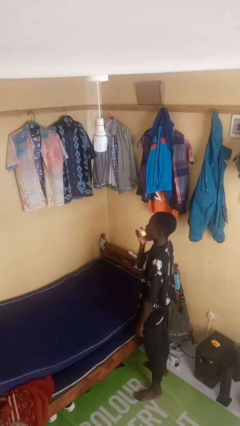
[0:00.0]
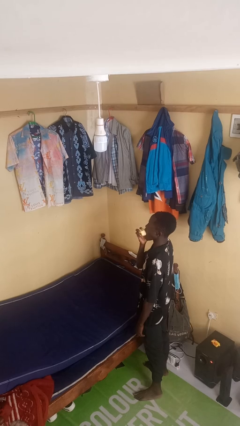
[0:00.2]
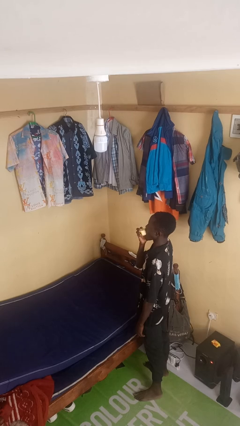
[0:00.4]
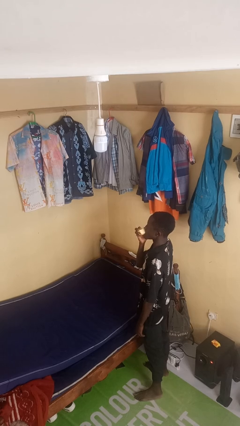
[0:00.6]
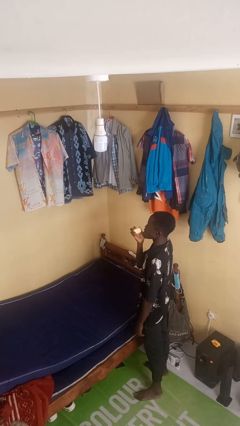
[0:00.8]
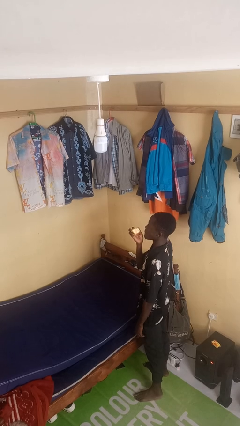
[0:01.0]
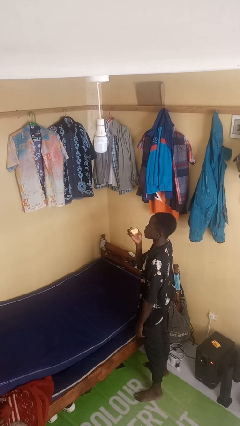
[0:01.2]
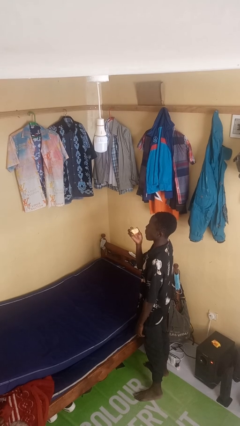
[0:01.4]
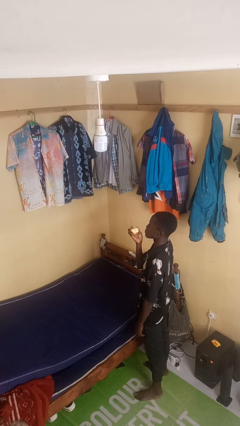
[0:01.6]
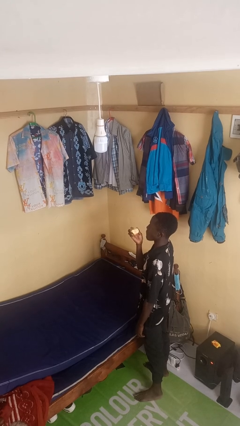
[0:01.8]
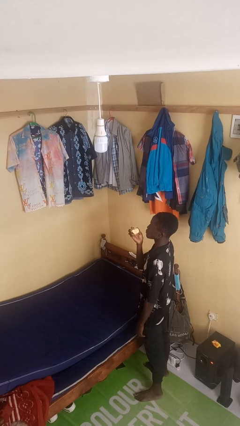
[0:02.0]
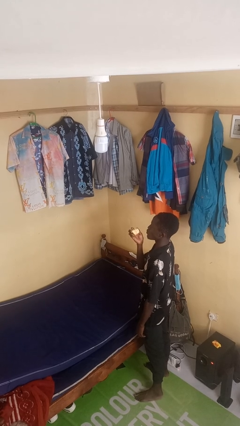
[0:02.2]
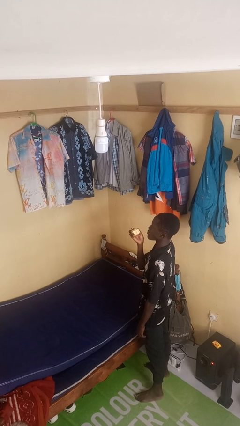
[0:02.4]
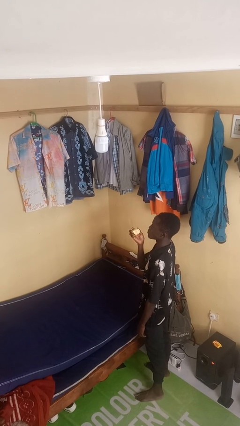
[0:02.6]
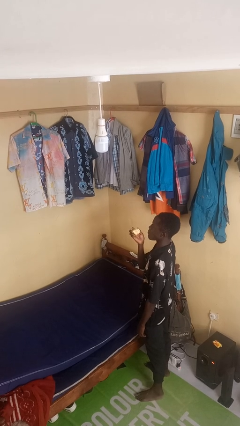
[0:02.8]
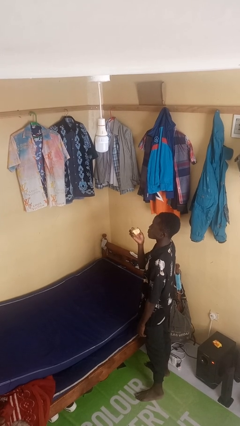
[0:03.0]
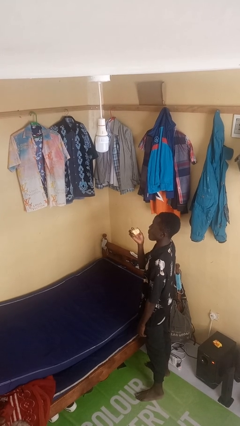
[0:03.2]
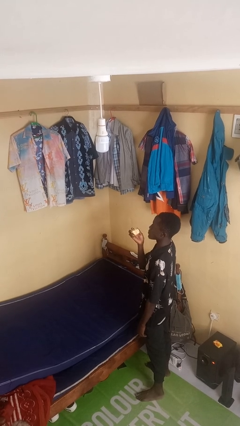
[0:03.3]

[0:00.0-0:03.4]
person eats apple

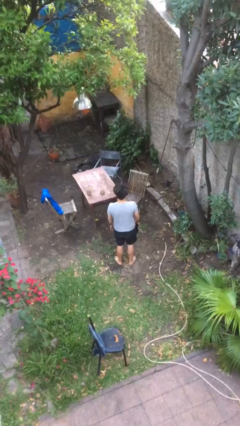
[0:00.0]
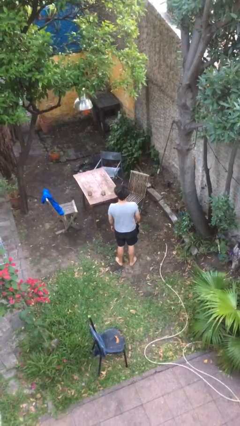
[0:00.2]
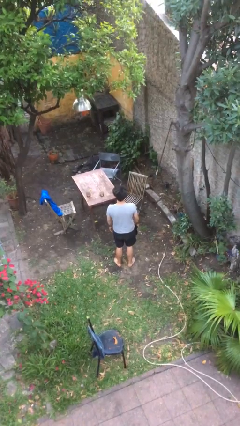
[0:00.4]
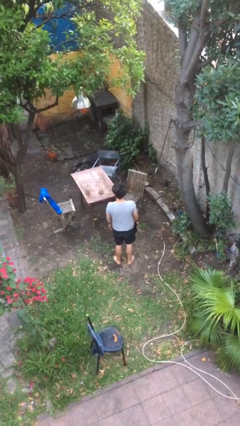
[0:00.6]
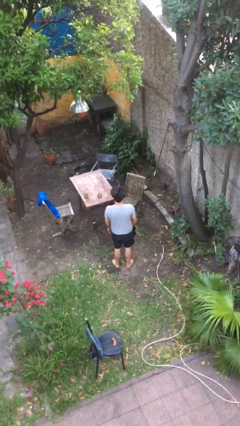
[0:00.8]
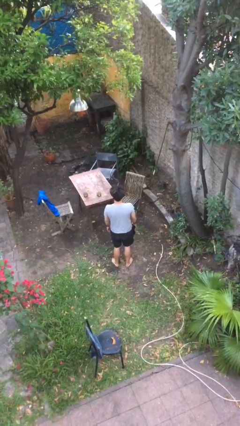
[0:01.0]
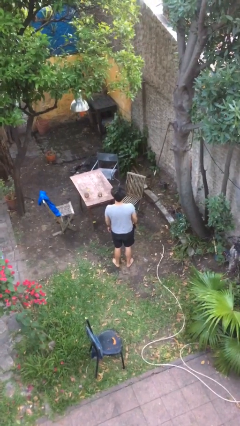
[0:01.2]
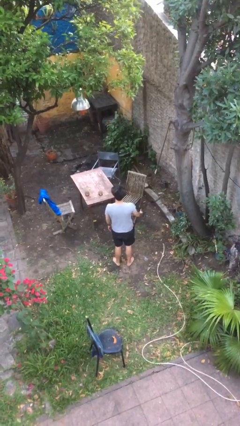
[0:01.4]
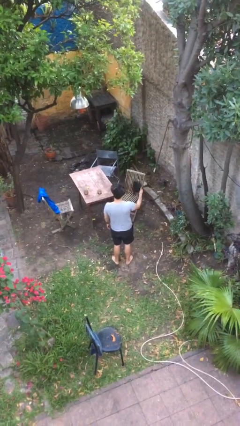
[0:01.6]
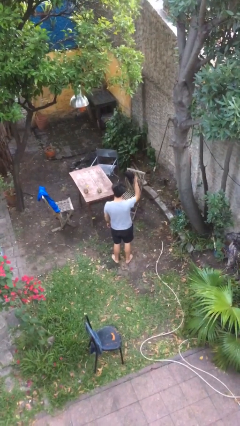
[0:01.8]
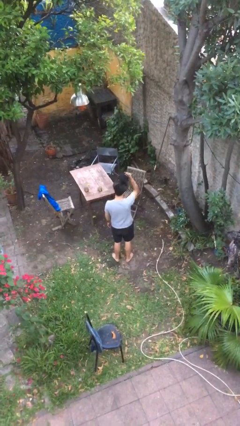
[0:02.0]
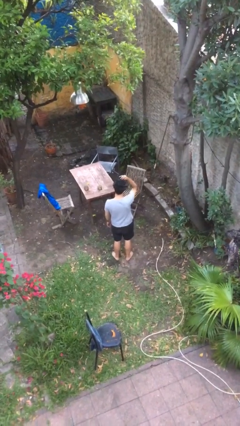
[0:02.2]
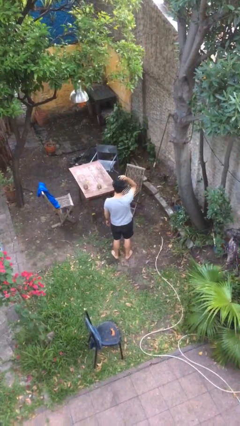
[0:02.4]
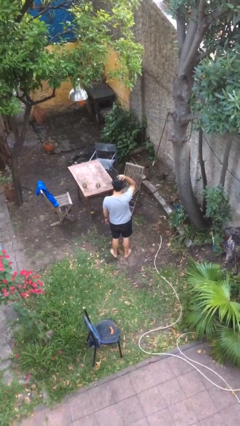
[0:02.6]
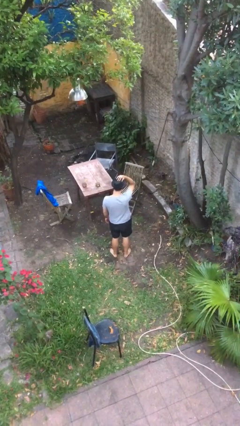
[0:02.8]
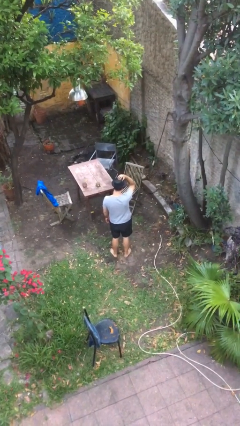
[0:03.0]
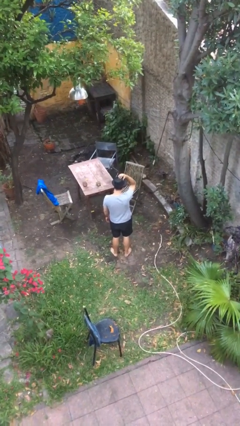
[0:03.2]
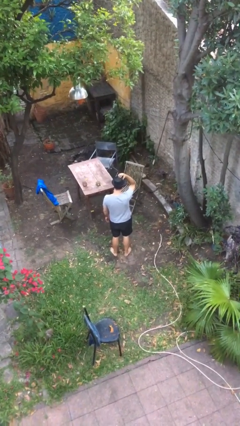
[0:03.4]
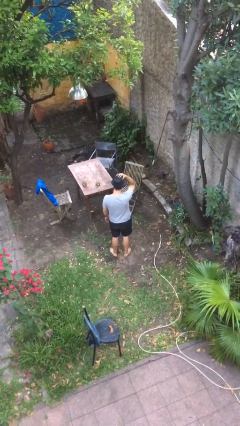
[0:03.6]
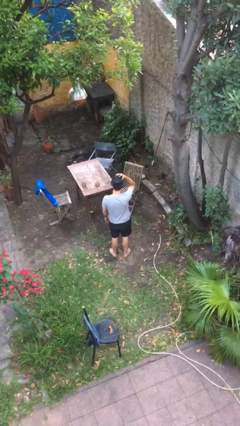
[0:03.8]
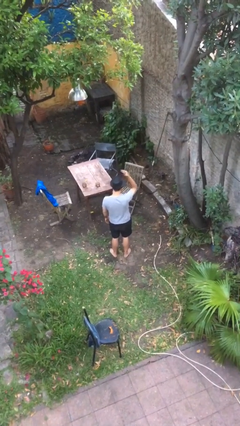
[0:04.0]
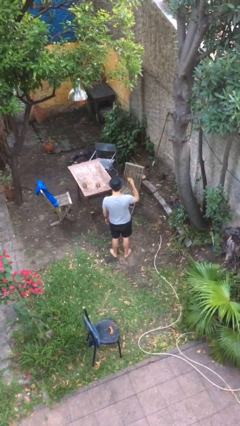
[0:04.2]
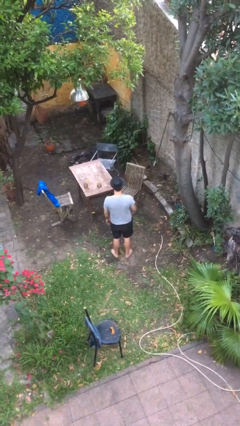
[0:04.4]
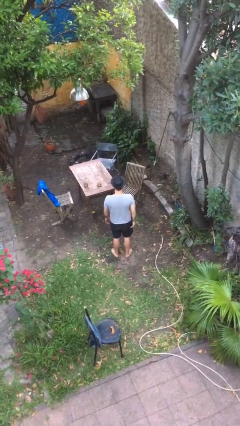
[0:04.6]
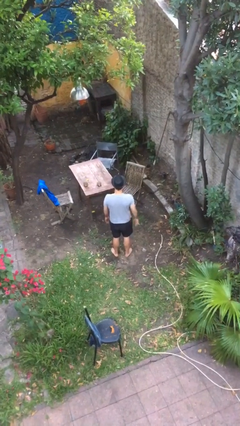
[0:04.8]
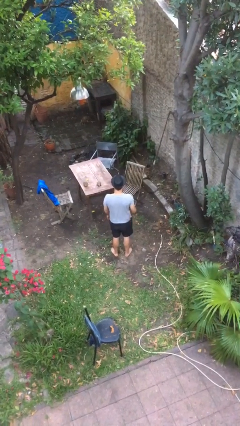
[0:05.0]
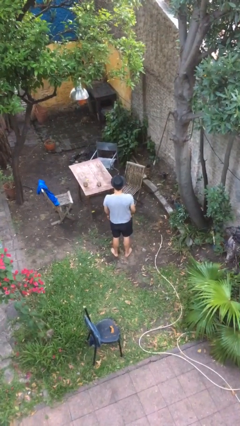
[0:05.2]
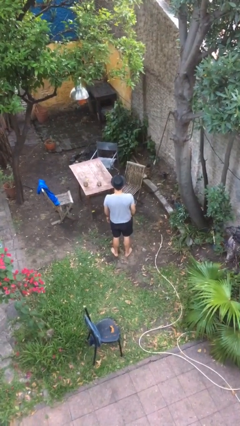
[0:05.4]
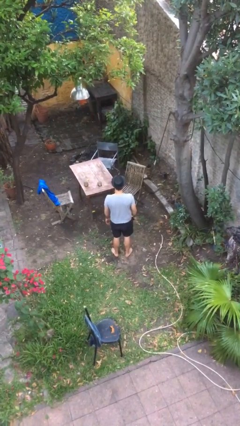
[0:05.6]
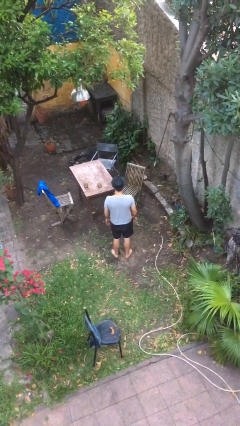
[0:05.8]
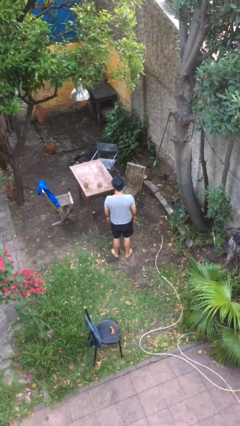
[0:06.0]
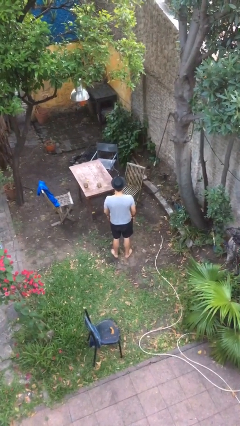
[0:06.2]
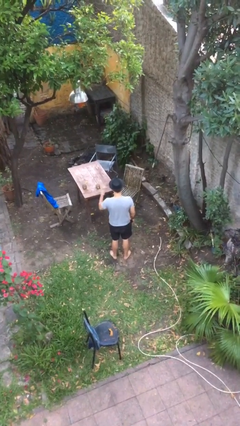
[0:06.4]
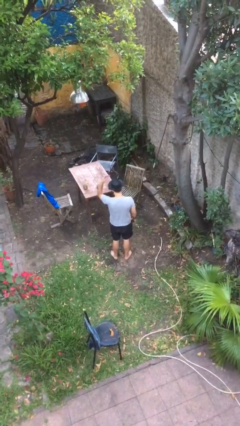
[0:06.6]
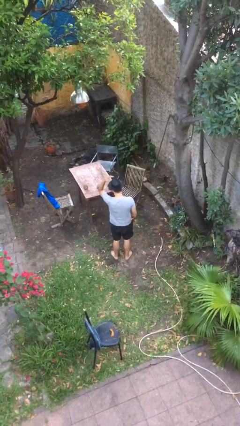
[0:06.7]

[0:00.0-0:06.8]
person puts on hat

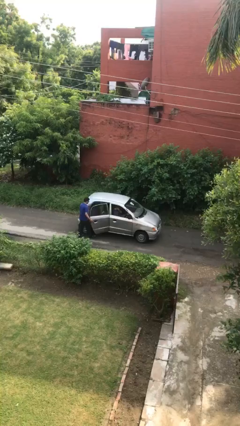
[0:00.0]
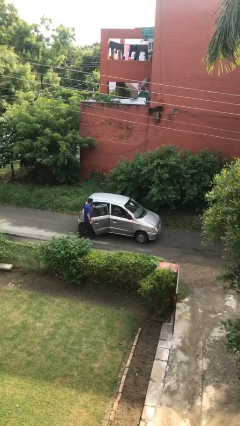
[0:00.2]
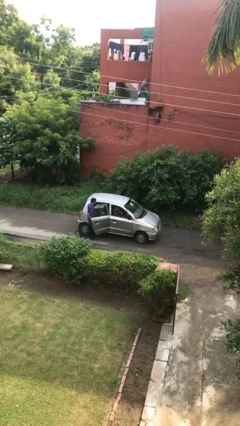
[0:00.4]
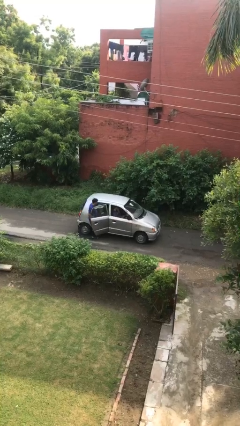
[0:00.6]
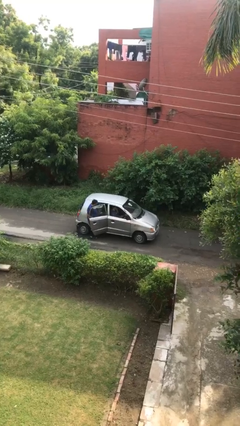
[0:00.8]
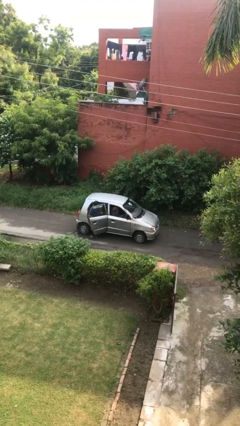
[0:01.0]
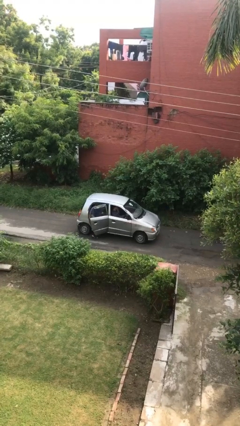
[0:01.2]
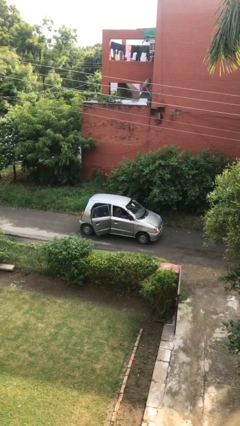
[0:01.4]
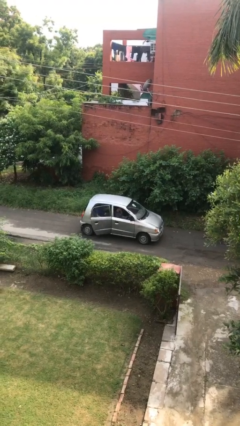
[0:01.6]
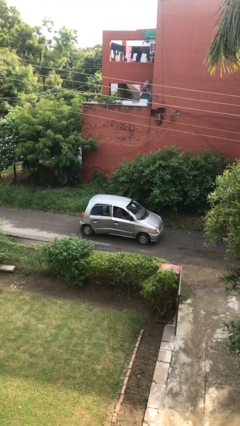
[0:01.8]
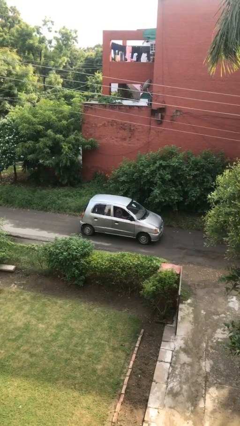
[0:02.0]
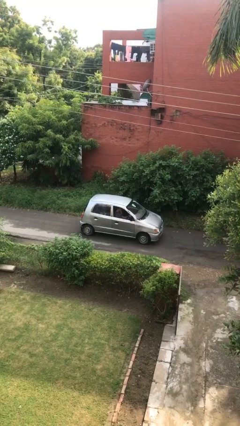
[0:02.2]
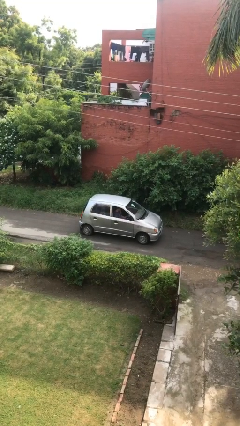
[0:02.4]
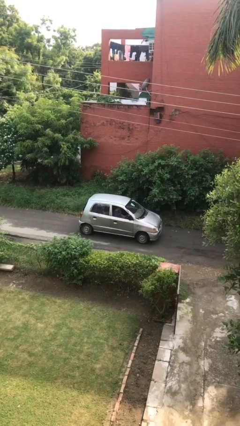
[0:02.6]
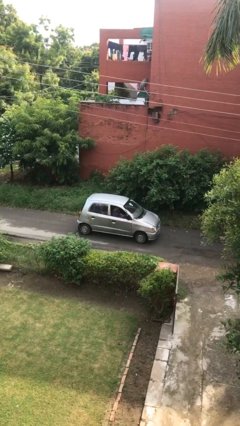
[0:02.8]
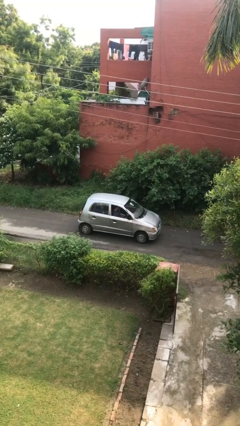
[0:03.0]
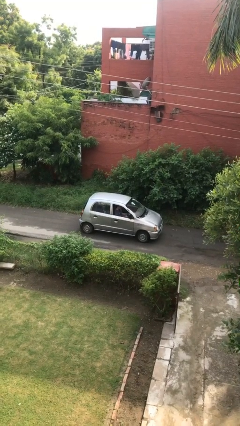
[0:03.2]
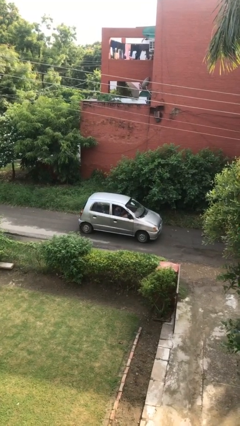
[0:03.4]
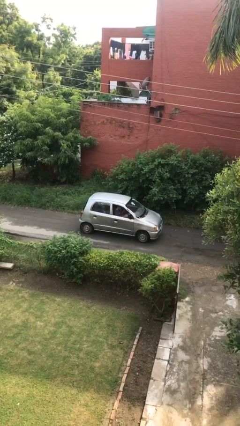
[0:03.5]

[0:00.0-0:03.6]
car picks up person

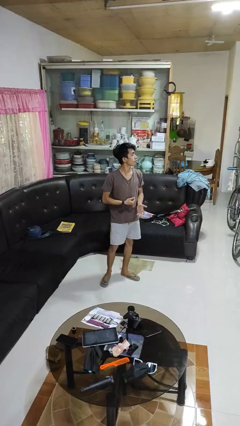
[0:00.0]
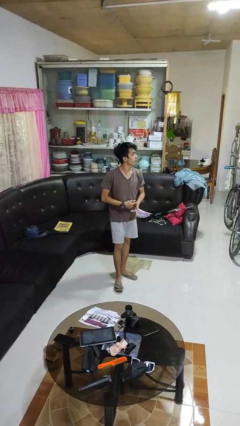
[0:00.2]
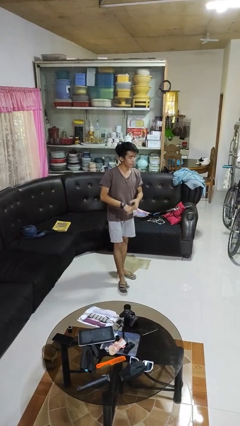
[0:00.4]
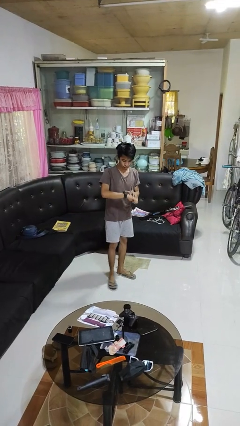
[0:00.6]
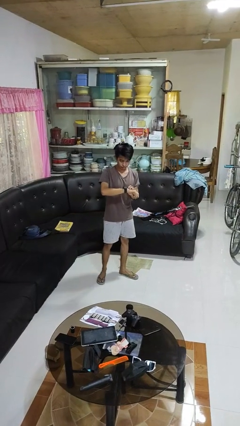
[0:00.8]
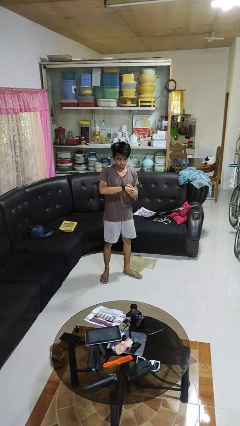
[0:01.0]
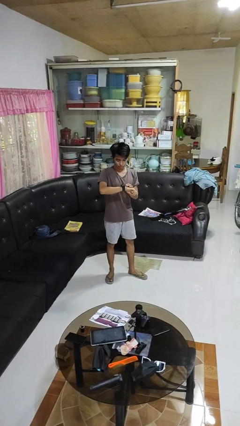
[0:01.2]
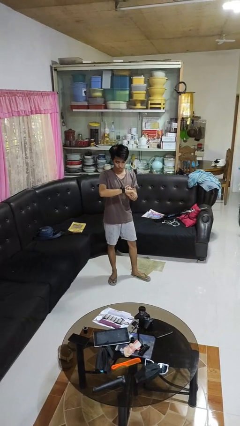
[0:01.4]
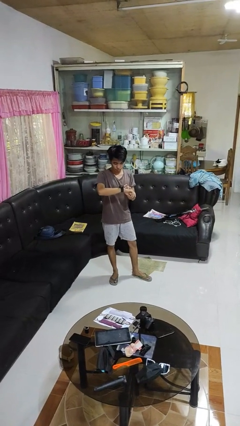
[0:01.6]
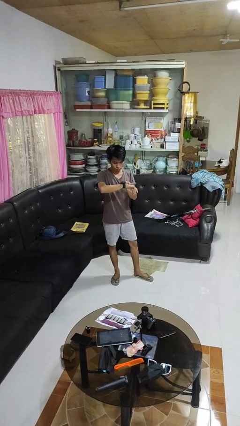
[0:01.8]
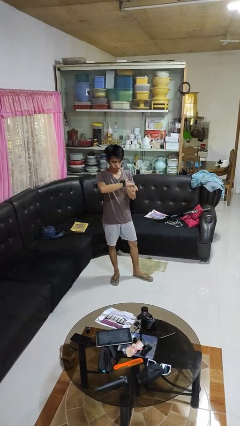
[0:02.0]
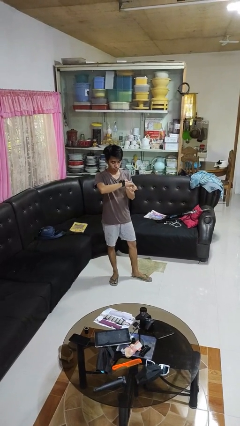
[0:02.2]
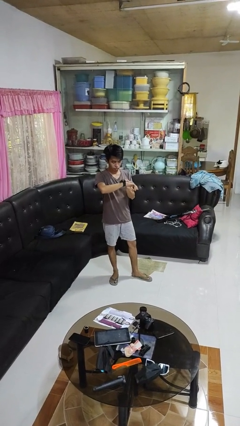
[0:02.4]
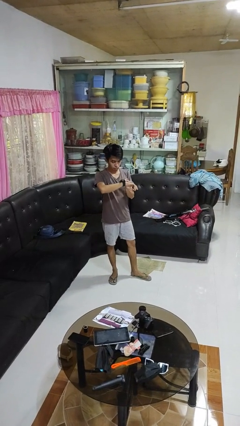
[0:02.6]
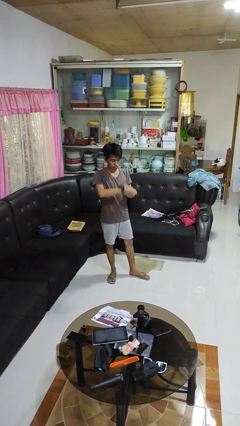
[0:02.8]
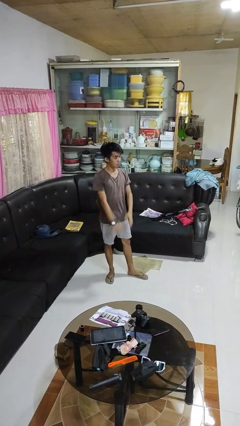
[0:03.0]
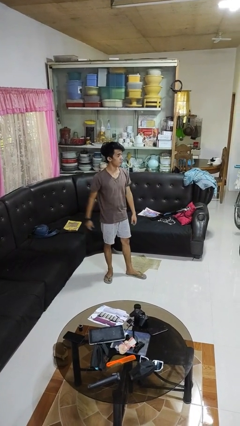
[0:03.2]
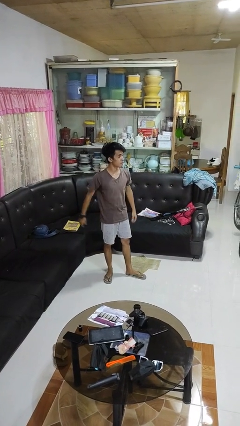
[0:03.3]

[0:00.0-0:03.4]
person looks at wristwatch

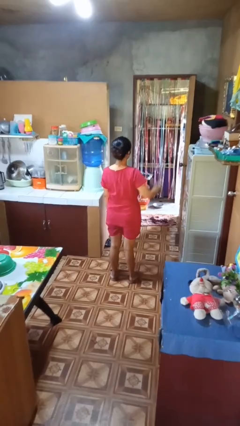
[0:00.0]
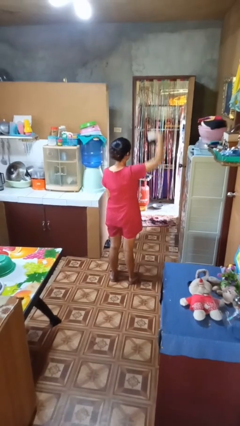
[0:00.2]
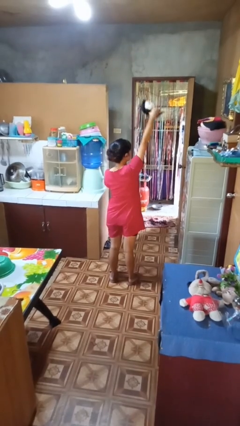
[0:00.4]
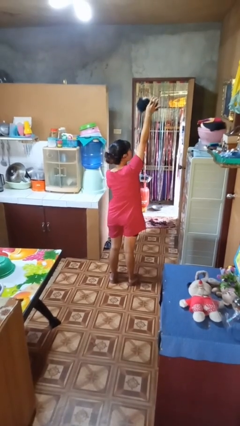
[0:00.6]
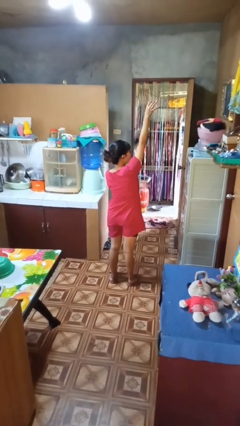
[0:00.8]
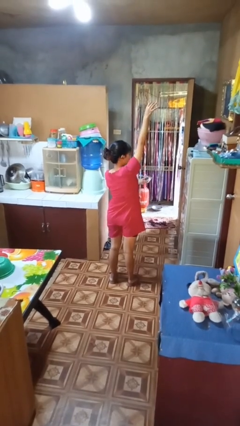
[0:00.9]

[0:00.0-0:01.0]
person drops object
